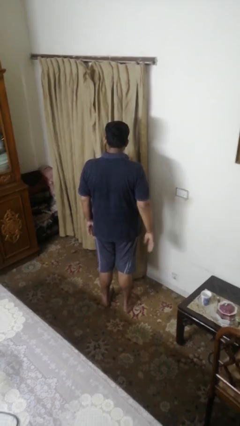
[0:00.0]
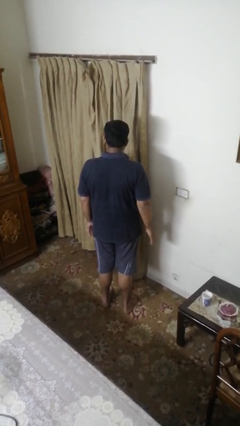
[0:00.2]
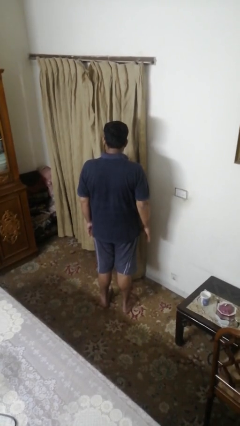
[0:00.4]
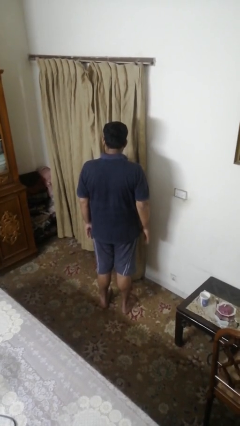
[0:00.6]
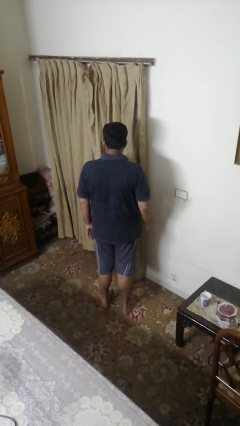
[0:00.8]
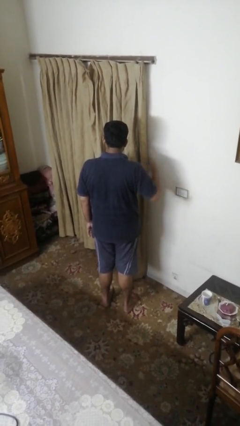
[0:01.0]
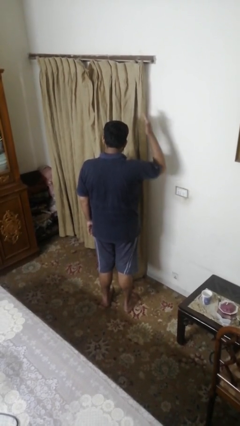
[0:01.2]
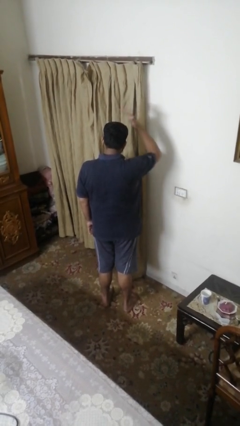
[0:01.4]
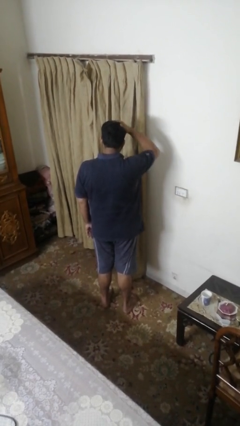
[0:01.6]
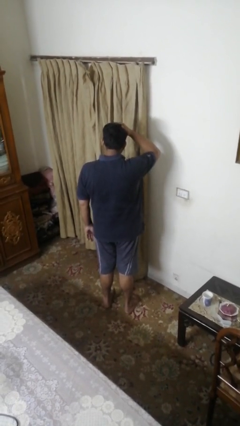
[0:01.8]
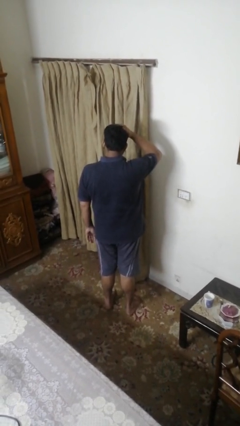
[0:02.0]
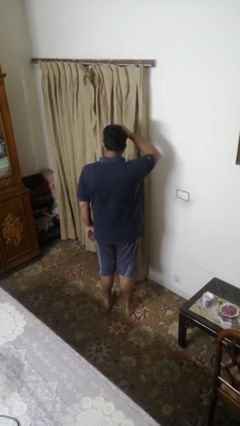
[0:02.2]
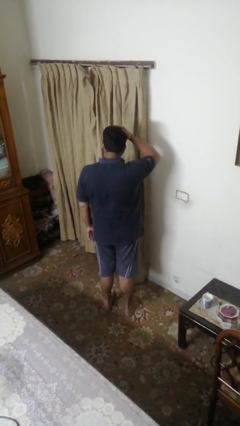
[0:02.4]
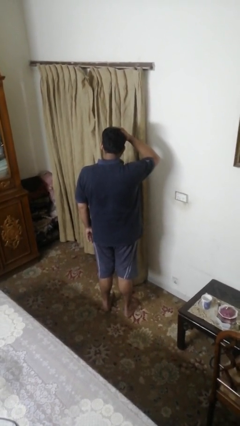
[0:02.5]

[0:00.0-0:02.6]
person pats head

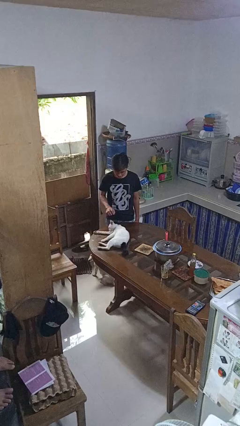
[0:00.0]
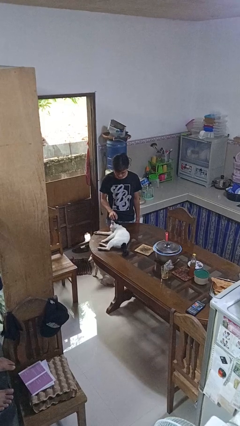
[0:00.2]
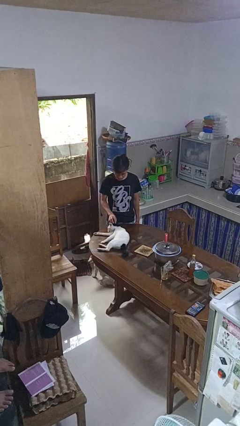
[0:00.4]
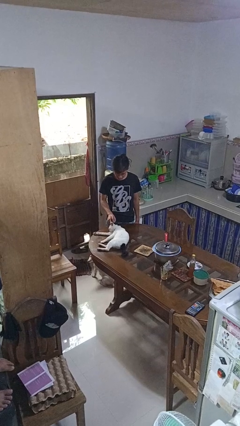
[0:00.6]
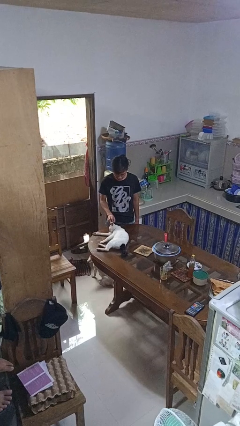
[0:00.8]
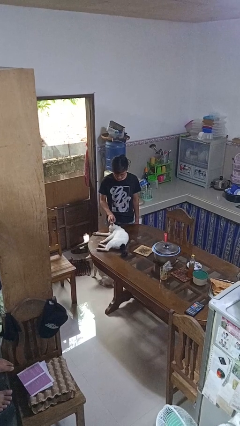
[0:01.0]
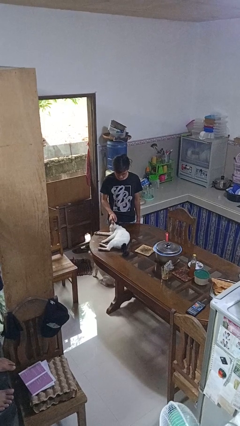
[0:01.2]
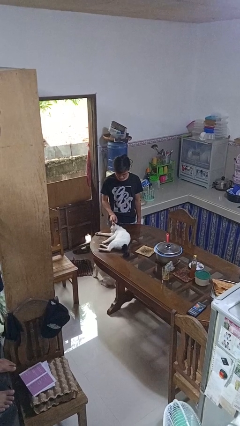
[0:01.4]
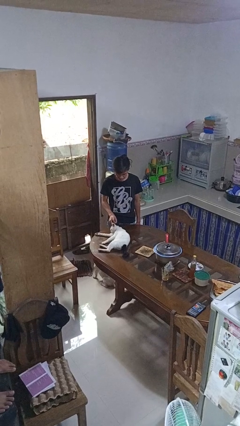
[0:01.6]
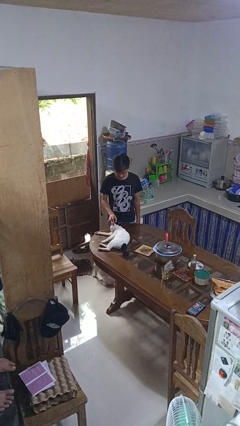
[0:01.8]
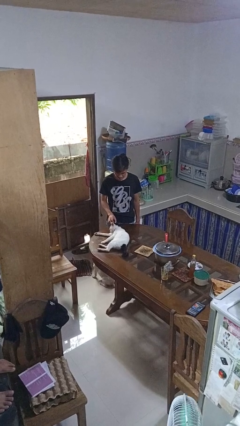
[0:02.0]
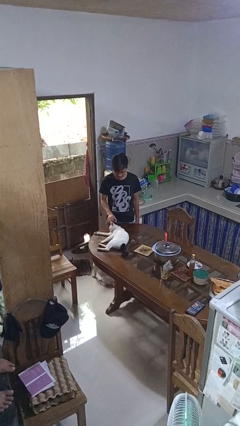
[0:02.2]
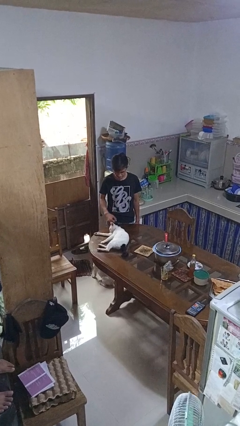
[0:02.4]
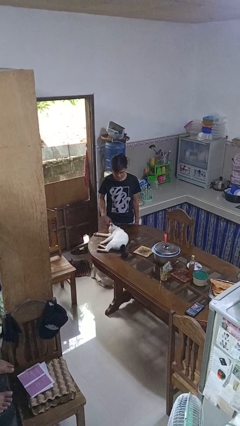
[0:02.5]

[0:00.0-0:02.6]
person pets cat

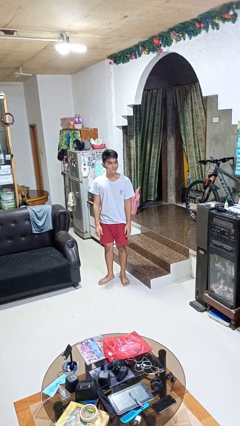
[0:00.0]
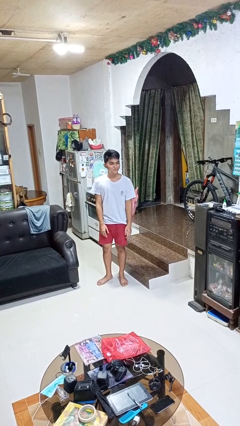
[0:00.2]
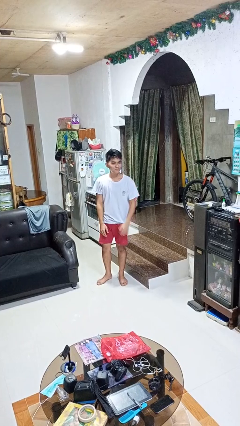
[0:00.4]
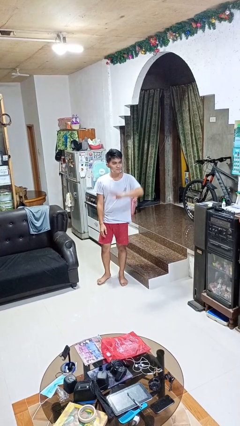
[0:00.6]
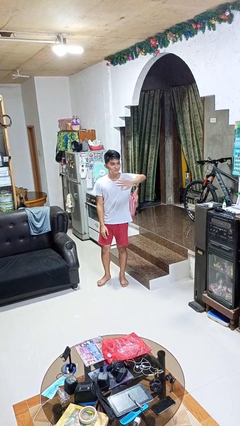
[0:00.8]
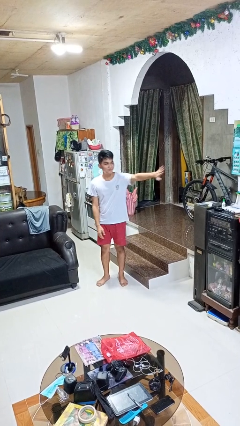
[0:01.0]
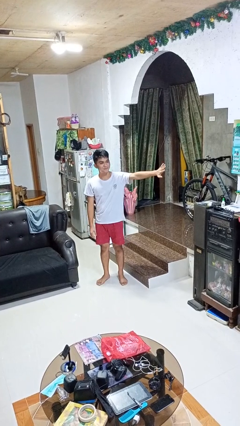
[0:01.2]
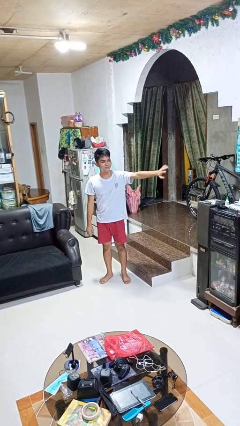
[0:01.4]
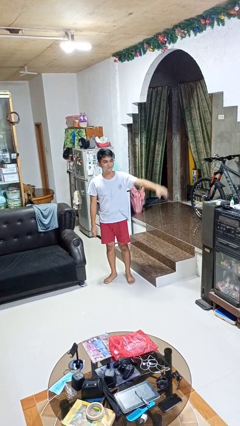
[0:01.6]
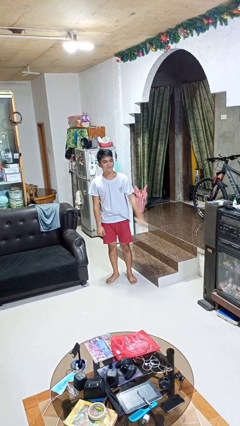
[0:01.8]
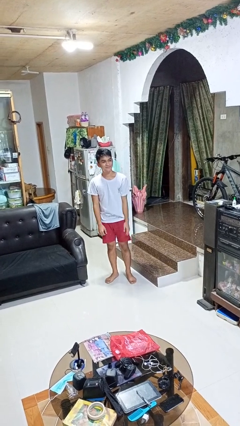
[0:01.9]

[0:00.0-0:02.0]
person gestures swipe left

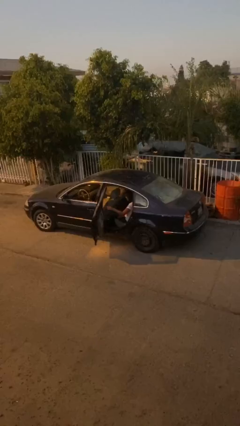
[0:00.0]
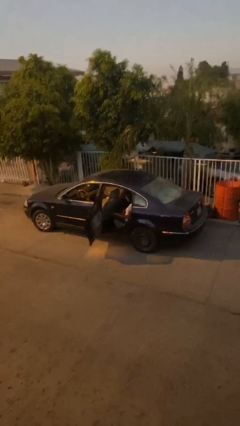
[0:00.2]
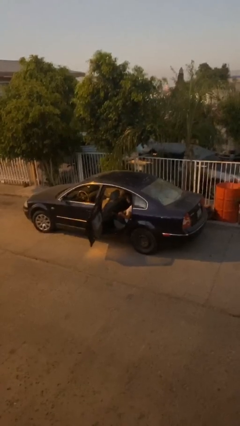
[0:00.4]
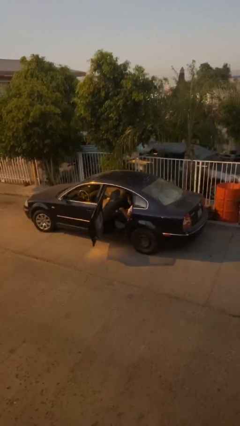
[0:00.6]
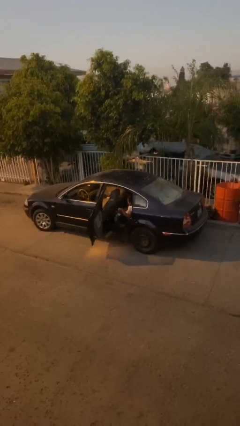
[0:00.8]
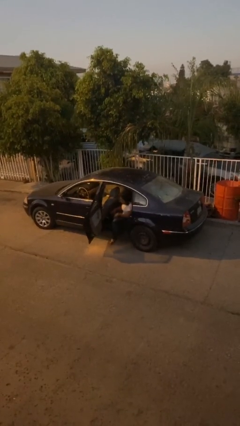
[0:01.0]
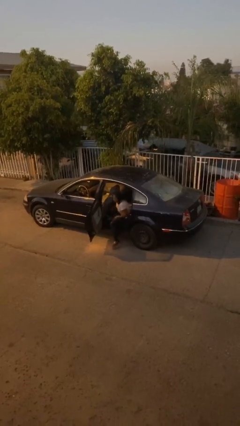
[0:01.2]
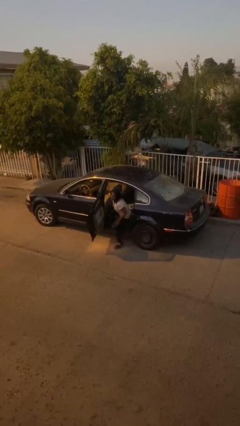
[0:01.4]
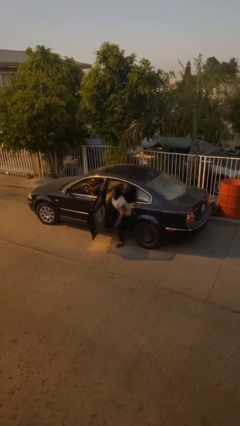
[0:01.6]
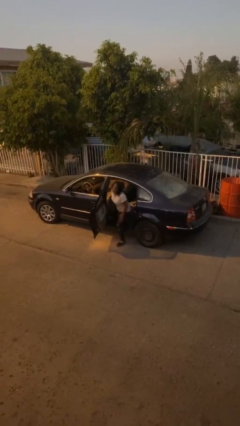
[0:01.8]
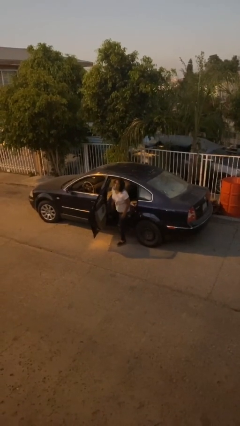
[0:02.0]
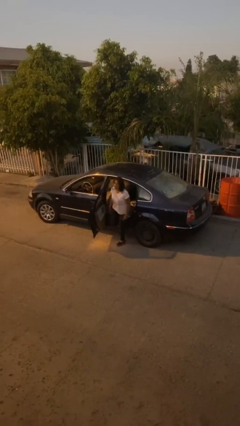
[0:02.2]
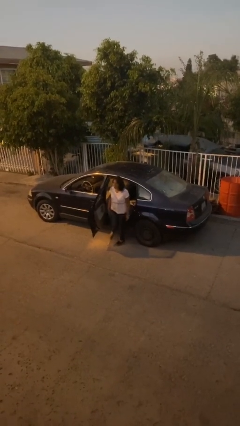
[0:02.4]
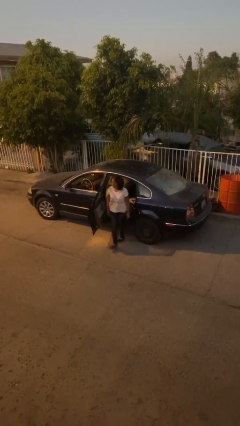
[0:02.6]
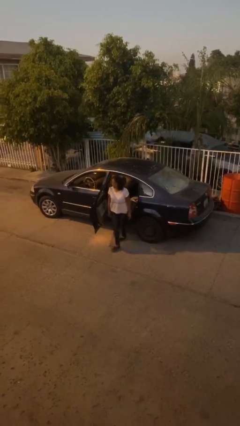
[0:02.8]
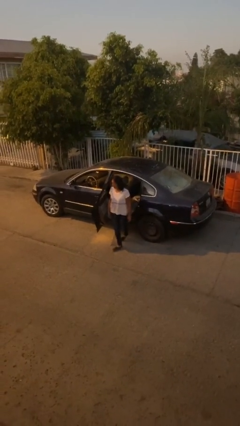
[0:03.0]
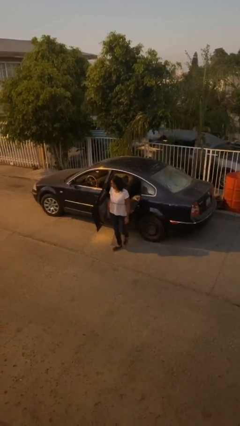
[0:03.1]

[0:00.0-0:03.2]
person exits car

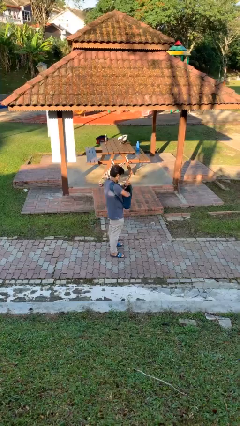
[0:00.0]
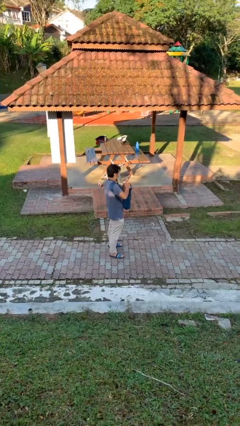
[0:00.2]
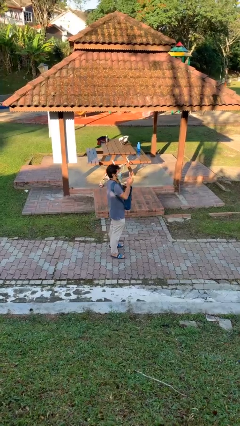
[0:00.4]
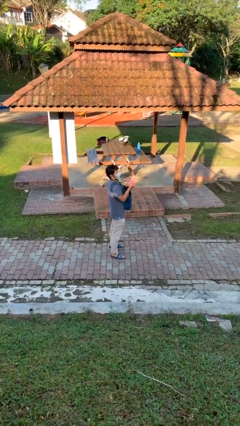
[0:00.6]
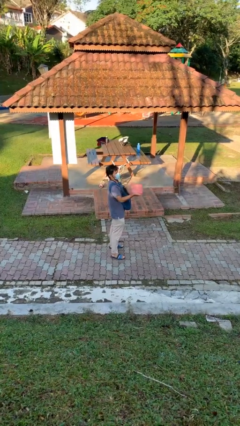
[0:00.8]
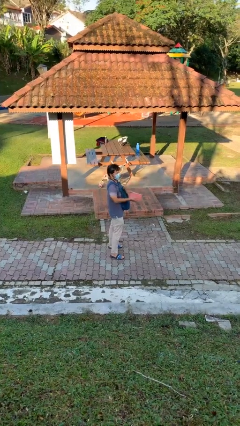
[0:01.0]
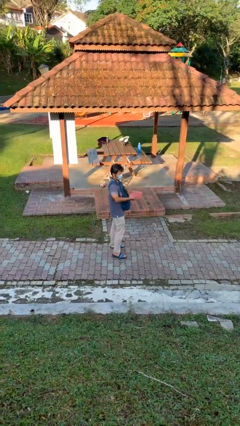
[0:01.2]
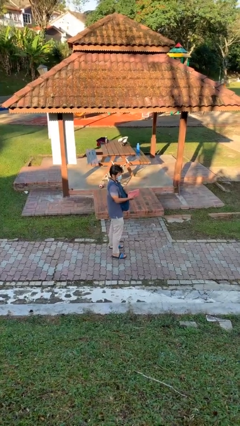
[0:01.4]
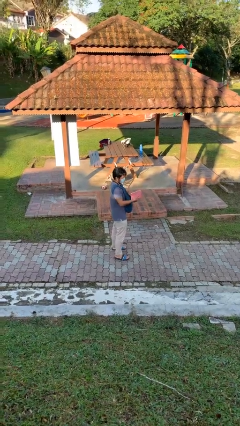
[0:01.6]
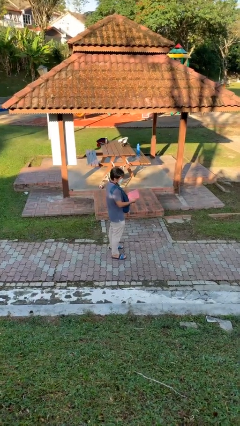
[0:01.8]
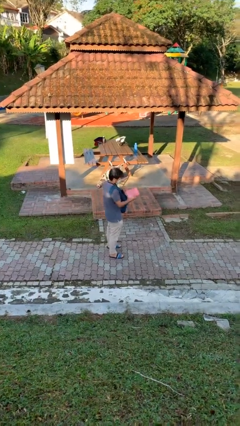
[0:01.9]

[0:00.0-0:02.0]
person takes object from backpack

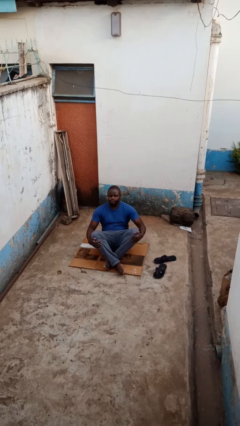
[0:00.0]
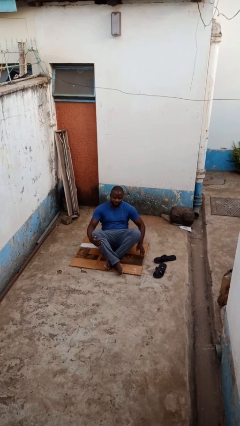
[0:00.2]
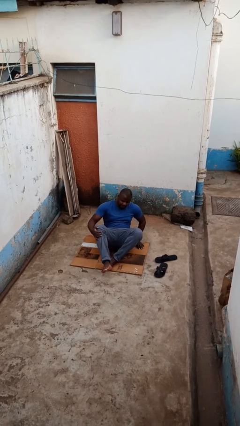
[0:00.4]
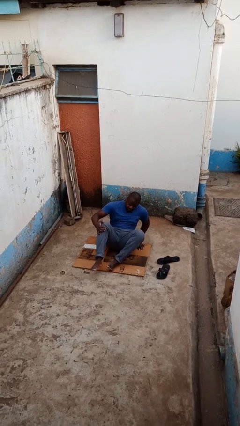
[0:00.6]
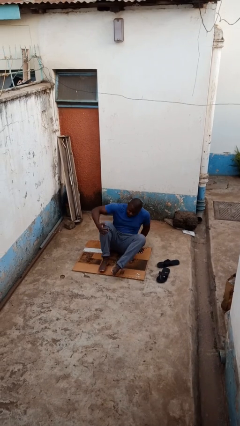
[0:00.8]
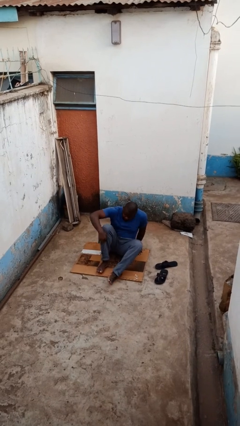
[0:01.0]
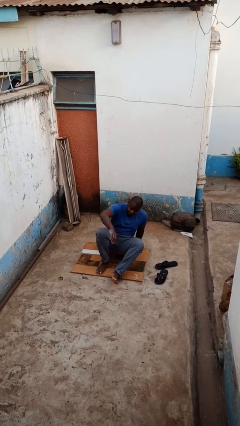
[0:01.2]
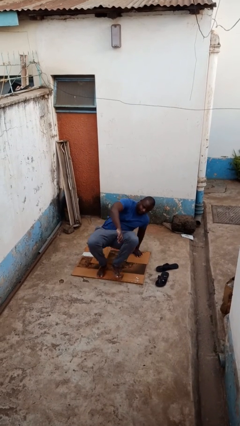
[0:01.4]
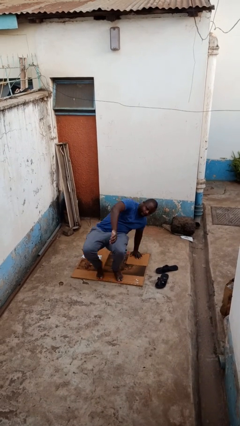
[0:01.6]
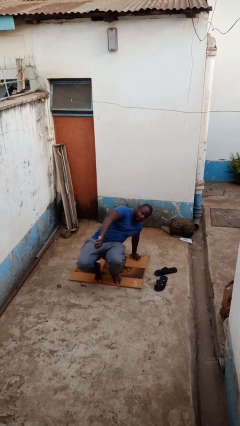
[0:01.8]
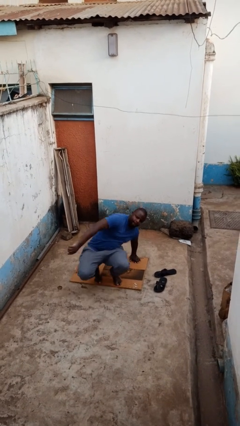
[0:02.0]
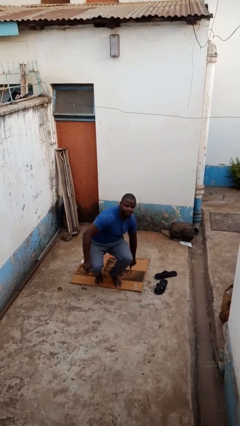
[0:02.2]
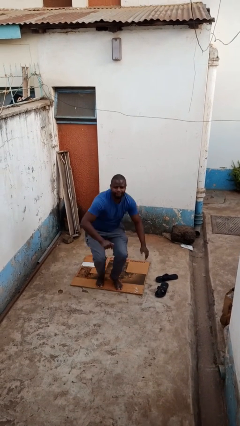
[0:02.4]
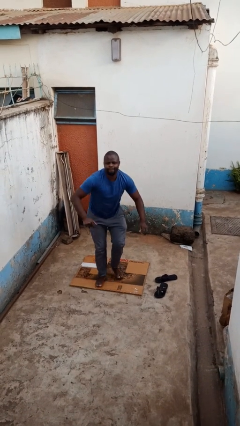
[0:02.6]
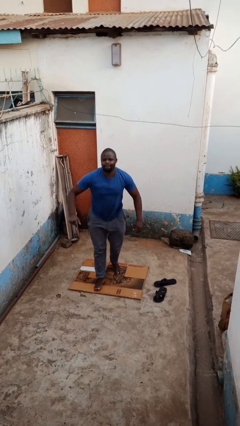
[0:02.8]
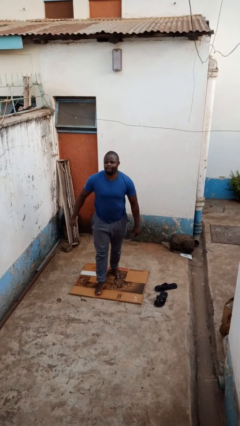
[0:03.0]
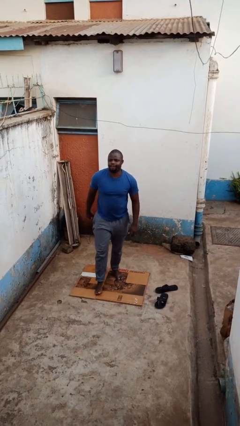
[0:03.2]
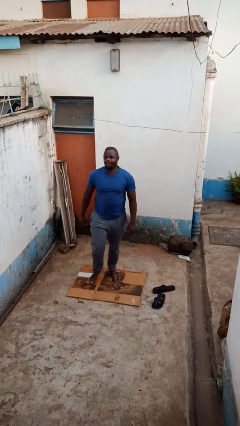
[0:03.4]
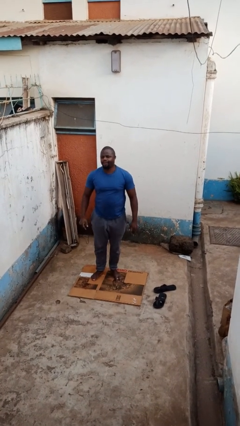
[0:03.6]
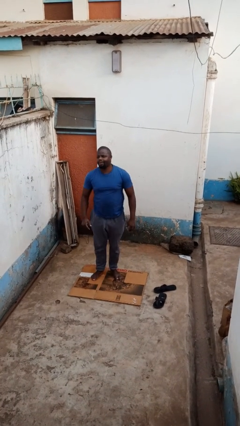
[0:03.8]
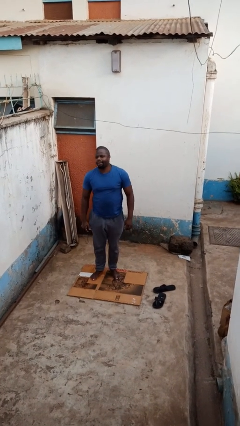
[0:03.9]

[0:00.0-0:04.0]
person stands up from floor

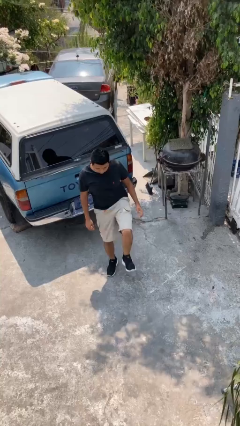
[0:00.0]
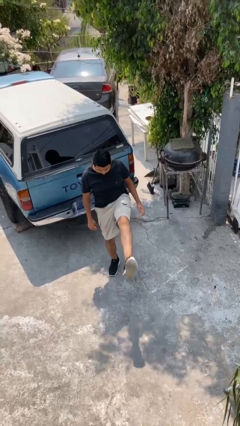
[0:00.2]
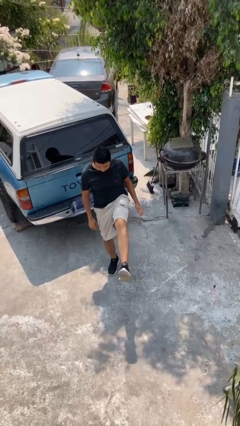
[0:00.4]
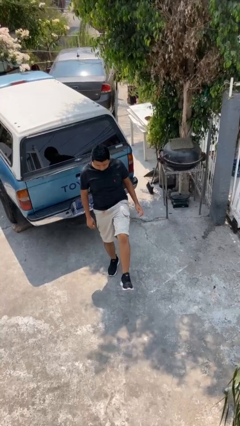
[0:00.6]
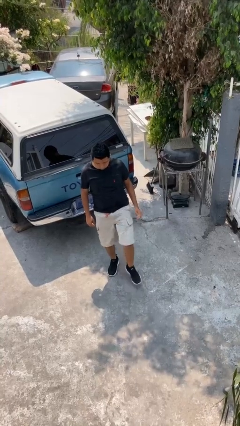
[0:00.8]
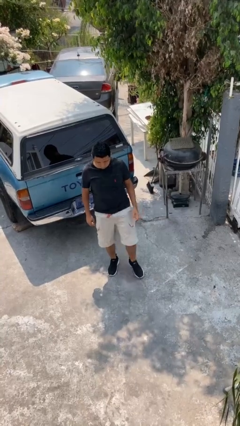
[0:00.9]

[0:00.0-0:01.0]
person karate kicks
